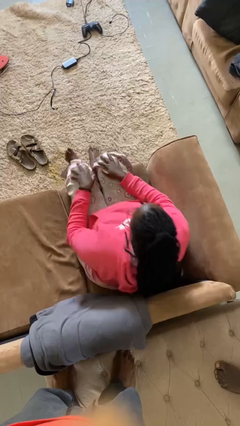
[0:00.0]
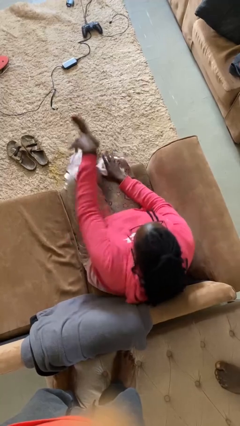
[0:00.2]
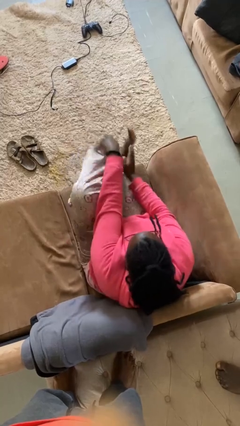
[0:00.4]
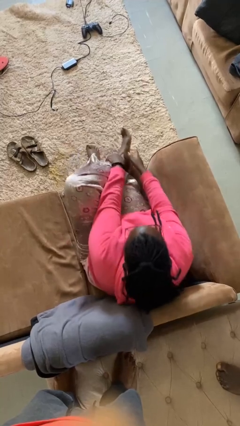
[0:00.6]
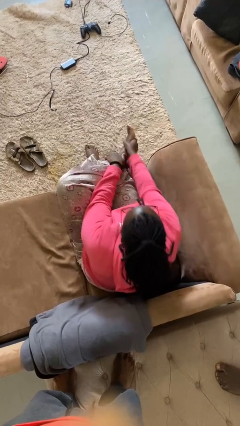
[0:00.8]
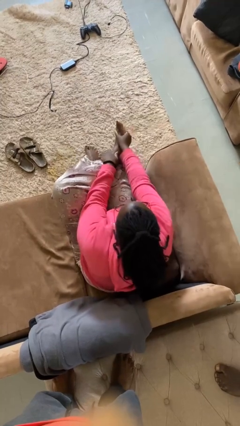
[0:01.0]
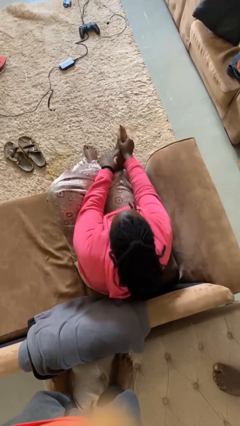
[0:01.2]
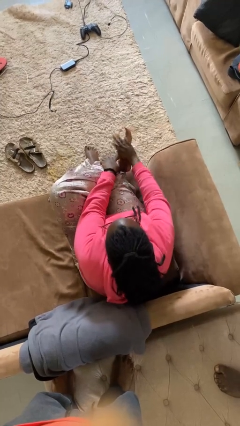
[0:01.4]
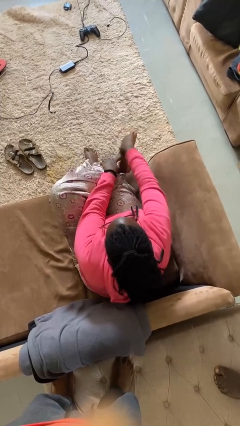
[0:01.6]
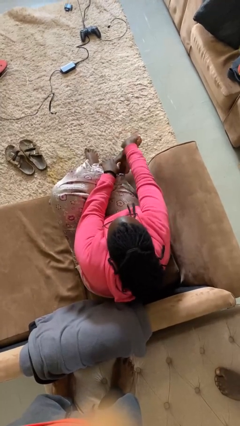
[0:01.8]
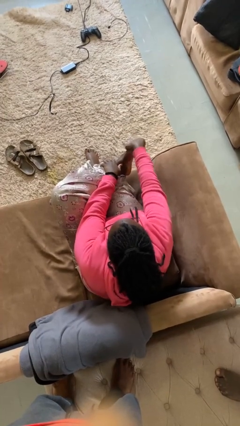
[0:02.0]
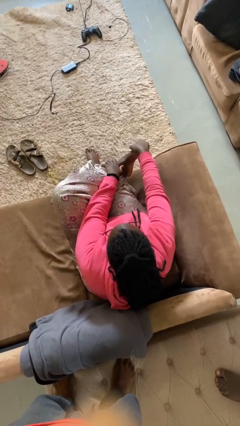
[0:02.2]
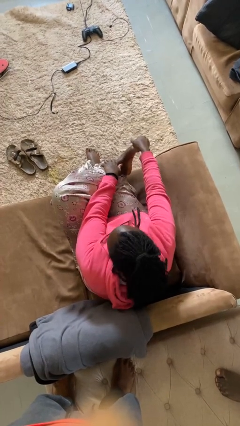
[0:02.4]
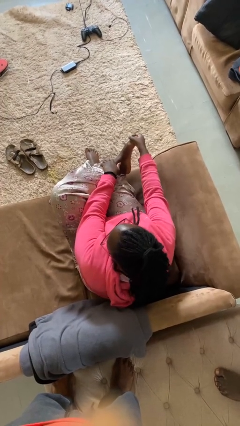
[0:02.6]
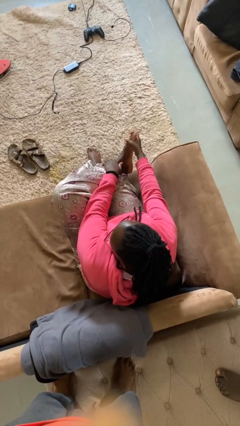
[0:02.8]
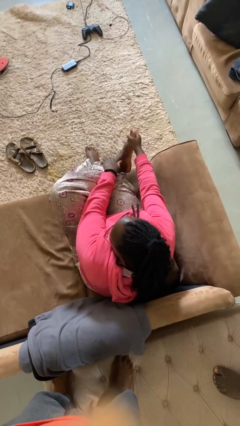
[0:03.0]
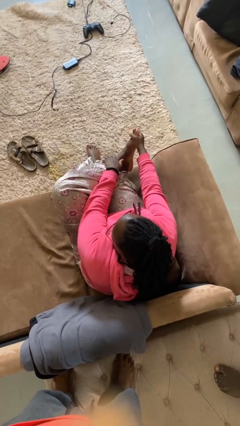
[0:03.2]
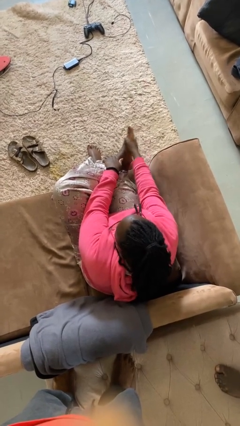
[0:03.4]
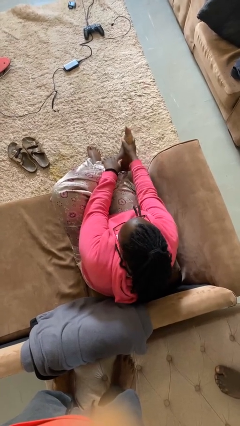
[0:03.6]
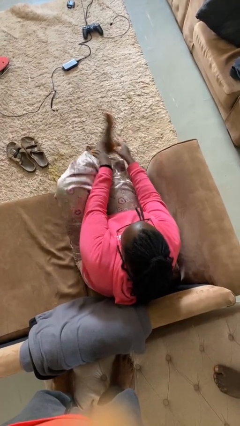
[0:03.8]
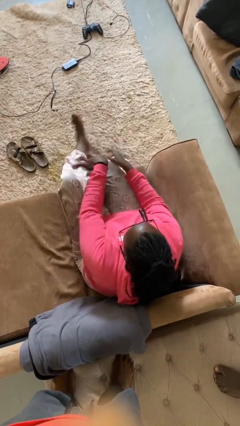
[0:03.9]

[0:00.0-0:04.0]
person rubs foot

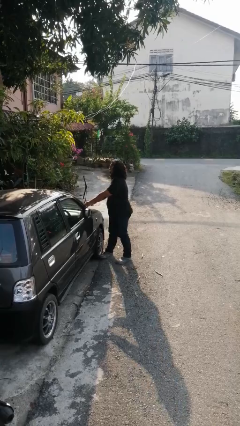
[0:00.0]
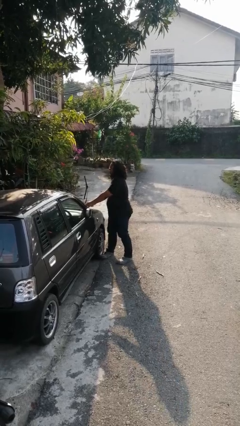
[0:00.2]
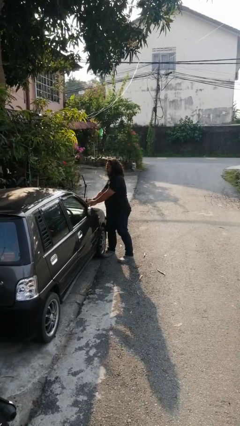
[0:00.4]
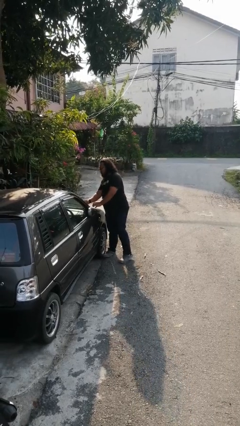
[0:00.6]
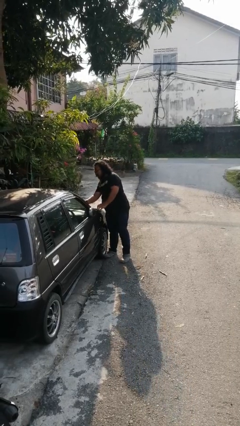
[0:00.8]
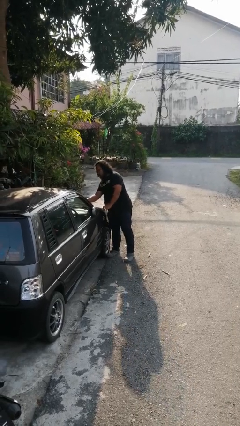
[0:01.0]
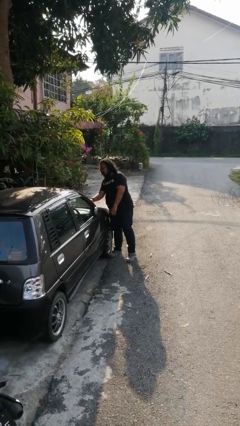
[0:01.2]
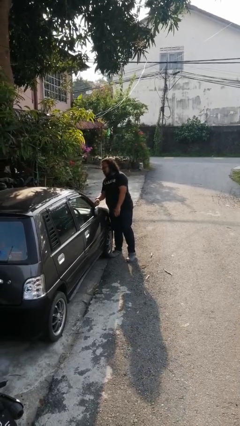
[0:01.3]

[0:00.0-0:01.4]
person flips down car wipers

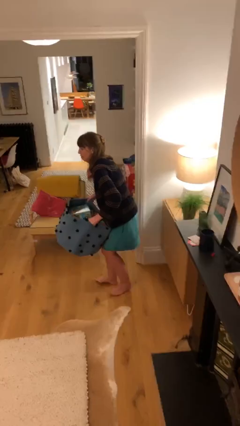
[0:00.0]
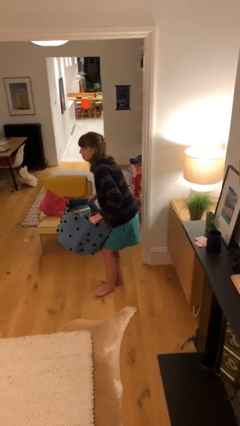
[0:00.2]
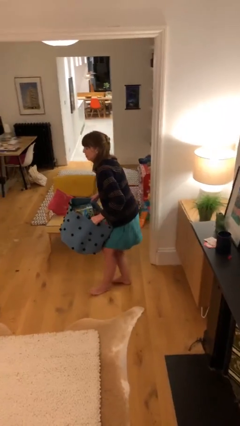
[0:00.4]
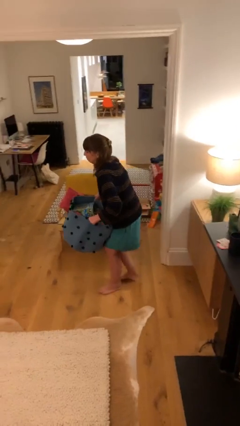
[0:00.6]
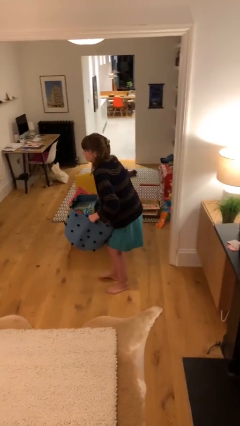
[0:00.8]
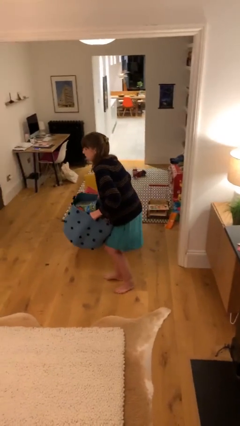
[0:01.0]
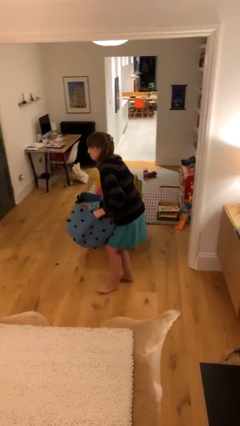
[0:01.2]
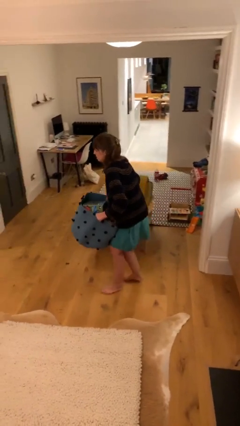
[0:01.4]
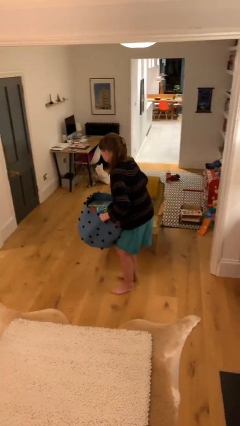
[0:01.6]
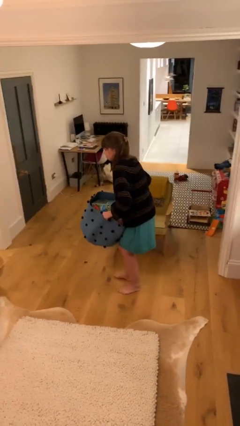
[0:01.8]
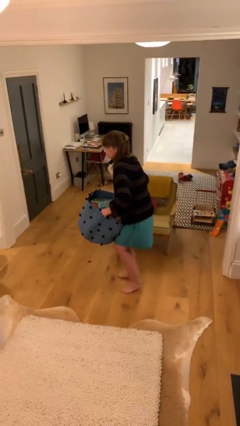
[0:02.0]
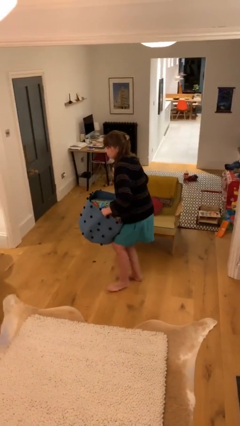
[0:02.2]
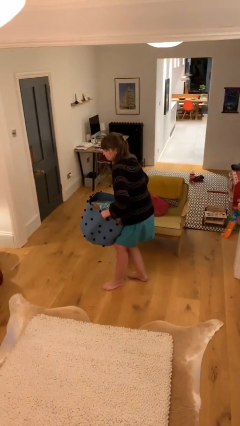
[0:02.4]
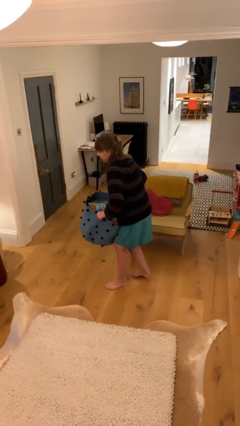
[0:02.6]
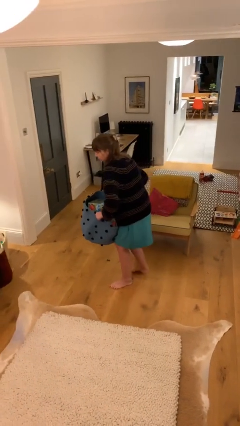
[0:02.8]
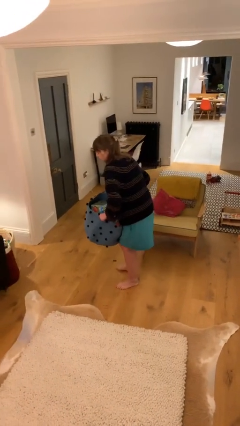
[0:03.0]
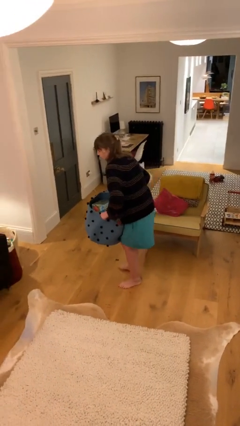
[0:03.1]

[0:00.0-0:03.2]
person carries heavy object

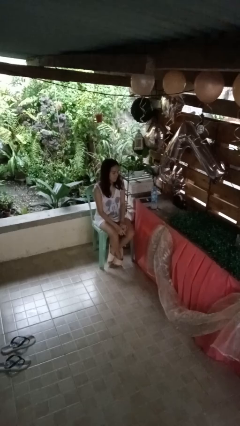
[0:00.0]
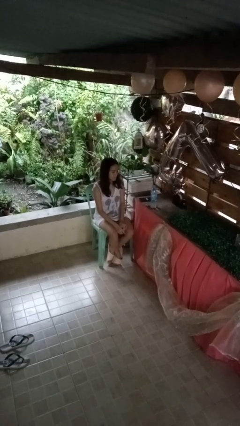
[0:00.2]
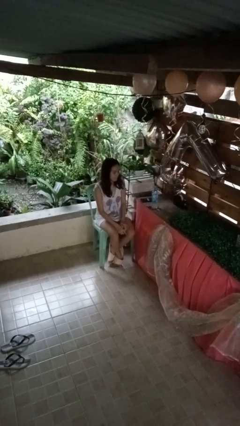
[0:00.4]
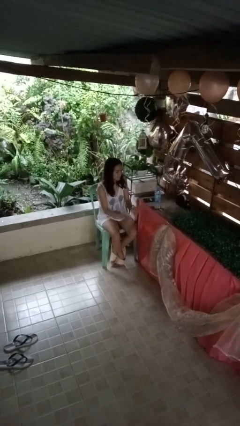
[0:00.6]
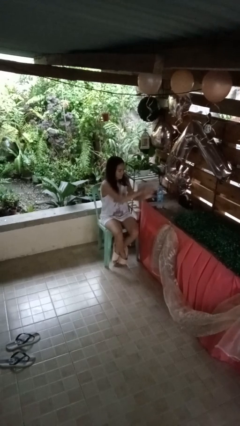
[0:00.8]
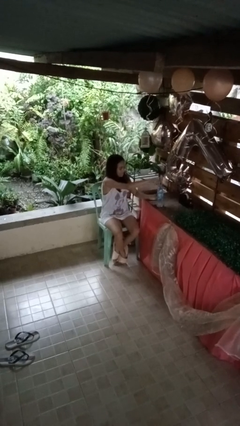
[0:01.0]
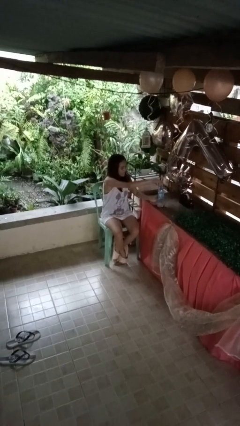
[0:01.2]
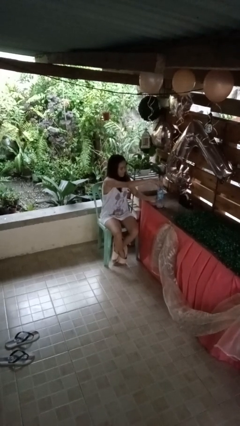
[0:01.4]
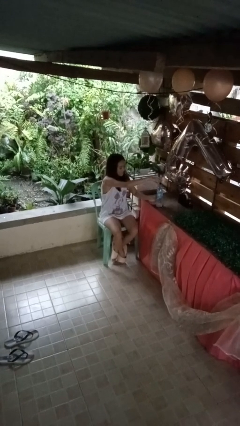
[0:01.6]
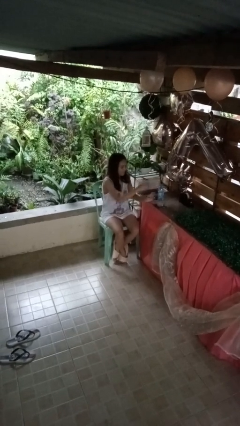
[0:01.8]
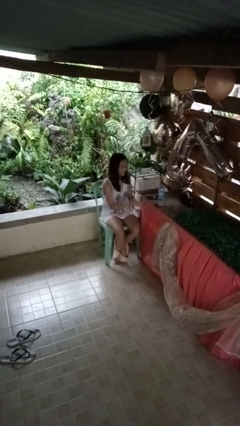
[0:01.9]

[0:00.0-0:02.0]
person unscrews lid from bottle

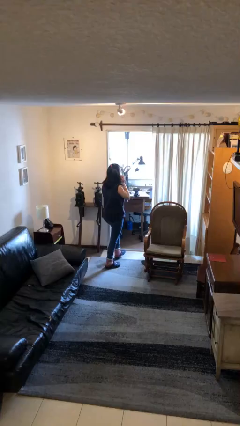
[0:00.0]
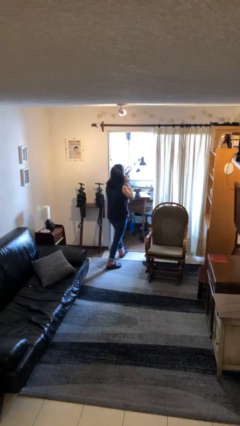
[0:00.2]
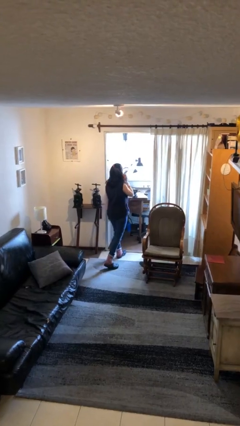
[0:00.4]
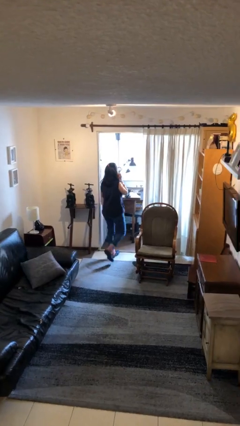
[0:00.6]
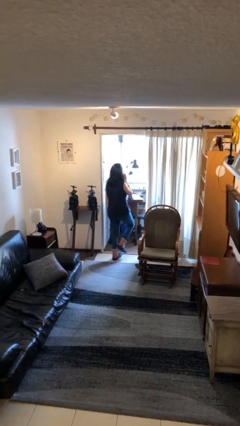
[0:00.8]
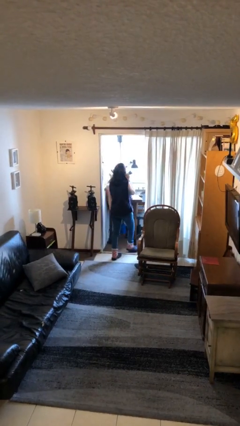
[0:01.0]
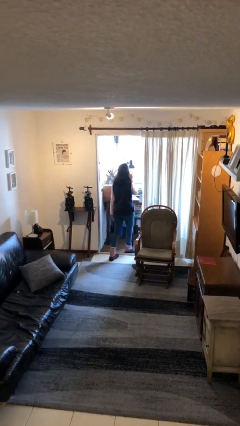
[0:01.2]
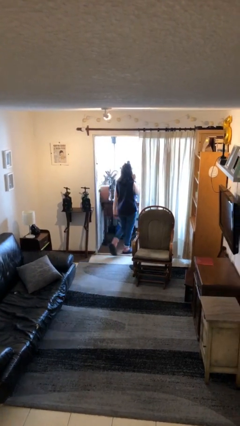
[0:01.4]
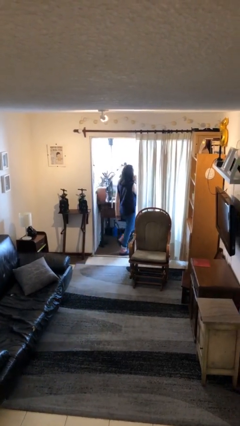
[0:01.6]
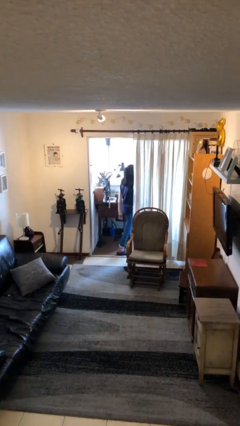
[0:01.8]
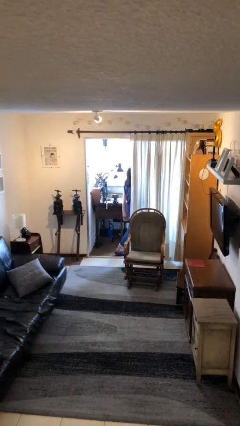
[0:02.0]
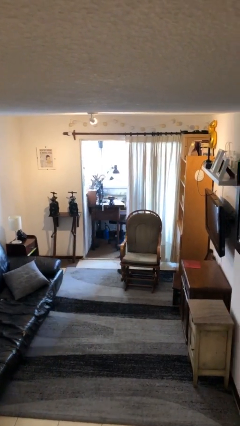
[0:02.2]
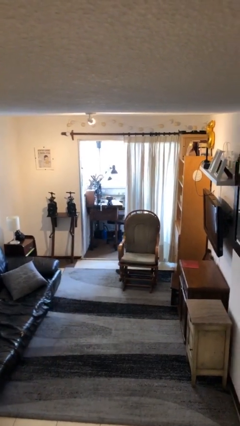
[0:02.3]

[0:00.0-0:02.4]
person exits scene through structure

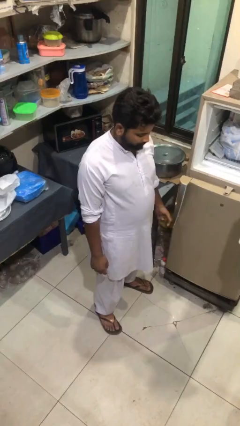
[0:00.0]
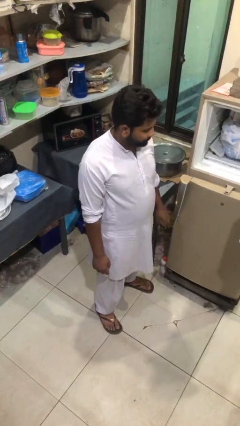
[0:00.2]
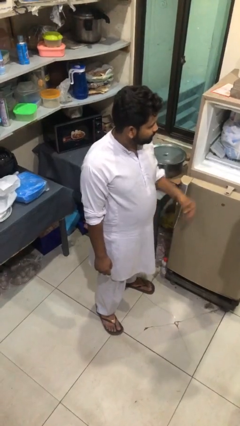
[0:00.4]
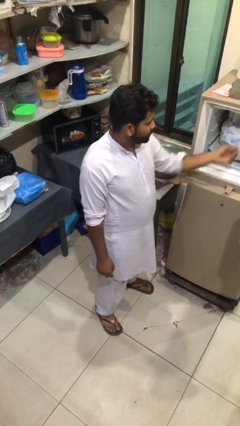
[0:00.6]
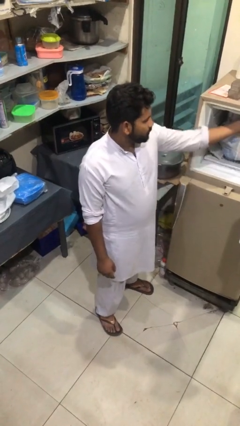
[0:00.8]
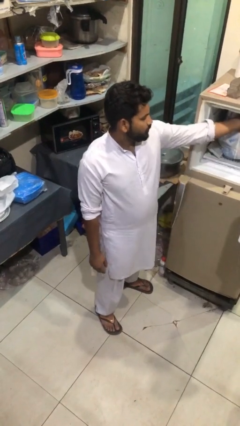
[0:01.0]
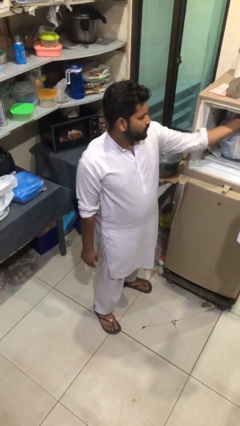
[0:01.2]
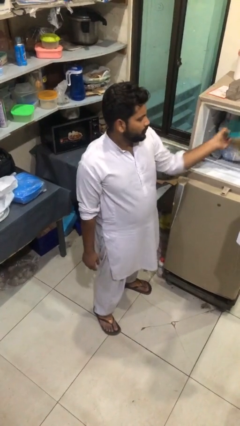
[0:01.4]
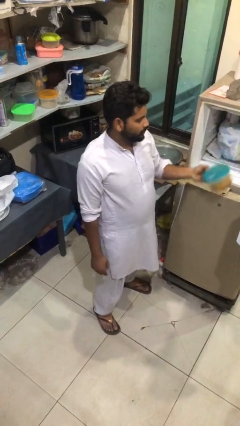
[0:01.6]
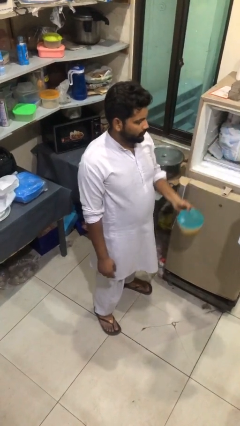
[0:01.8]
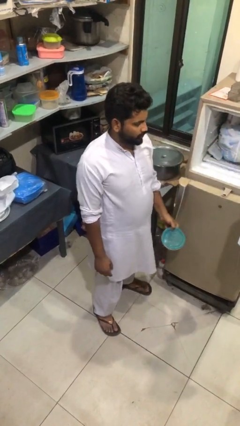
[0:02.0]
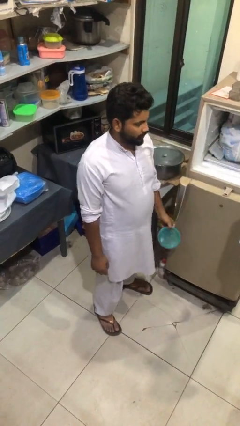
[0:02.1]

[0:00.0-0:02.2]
person takes object from refrigerator

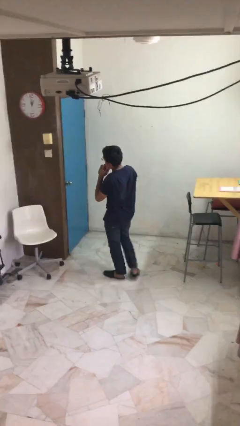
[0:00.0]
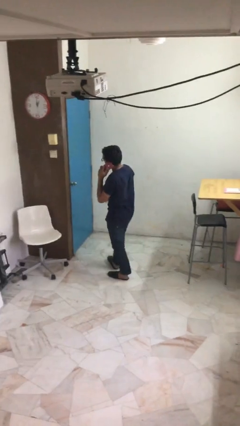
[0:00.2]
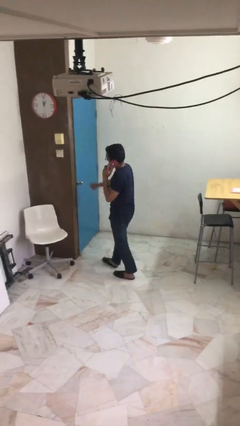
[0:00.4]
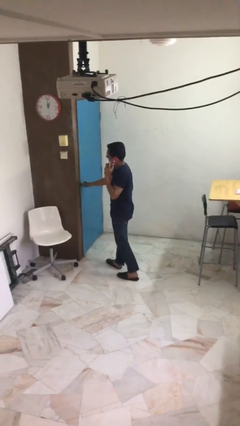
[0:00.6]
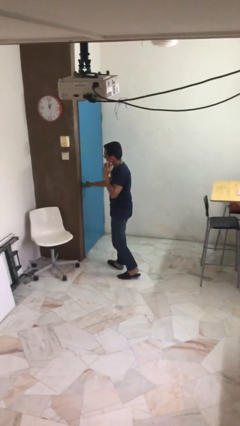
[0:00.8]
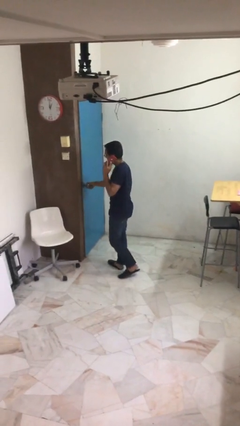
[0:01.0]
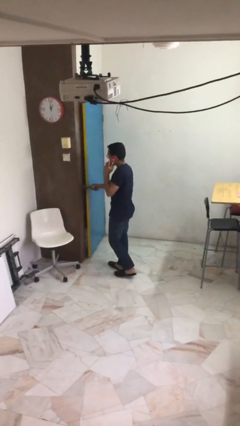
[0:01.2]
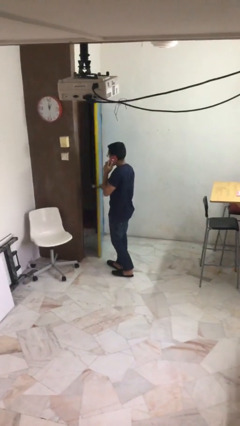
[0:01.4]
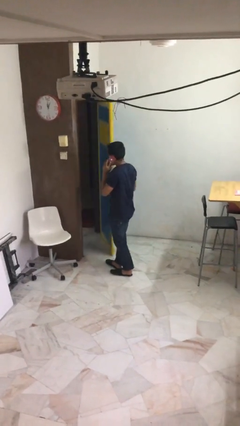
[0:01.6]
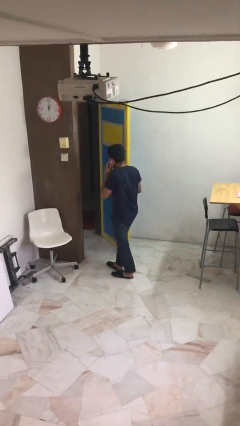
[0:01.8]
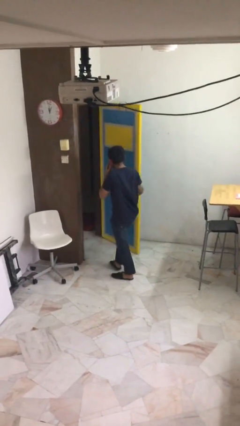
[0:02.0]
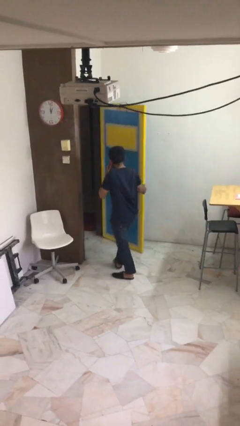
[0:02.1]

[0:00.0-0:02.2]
person opens facility door
